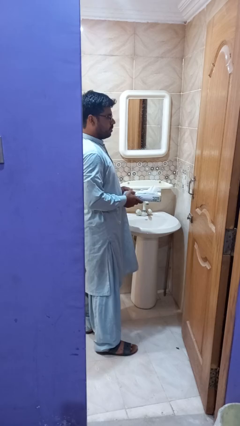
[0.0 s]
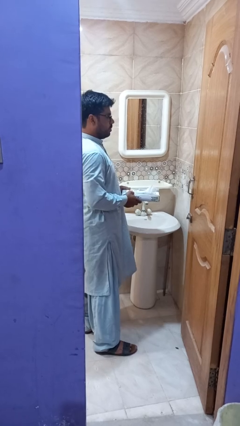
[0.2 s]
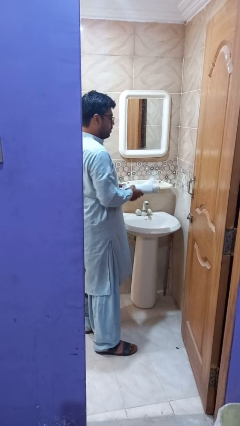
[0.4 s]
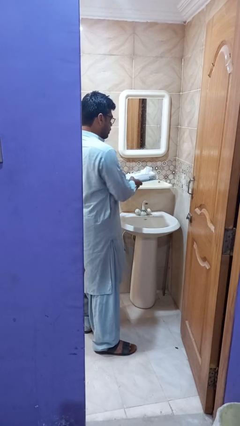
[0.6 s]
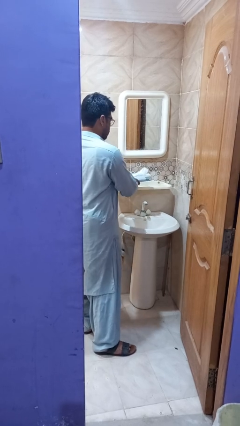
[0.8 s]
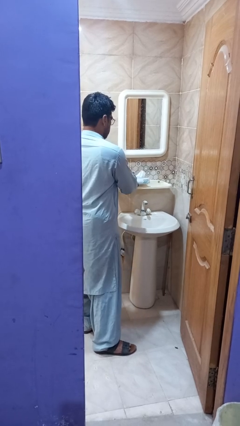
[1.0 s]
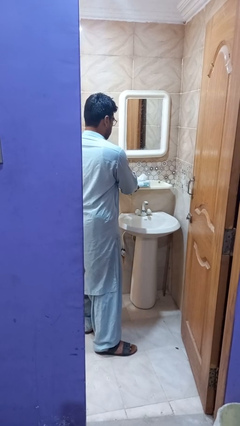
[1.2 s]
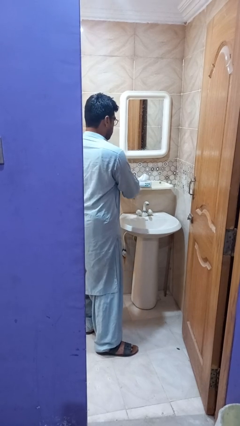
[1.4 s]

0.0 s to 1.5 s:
person puts down object on countertop

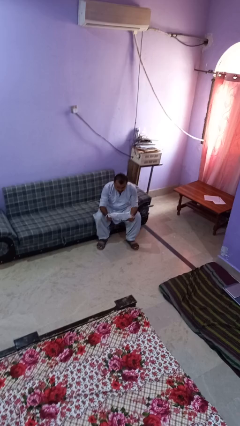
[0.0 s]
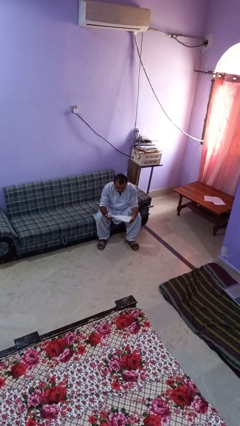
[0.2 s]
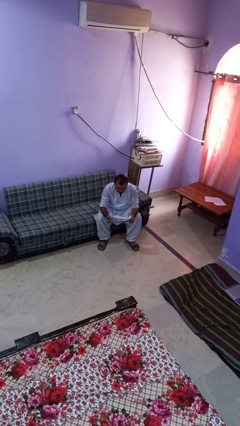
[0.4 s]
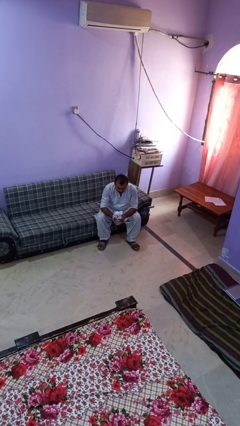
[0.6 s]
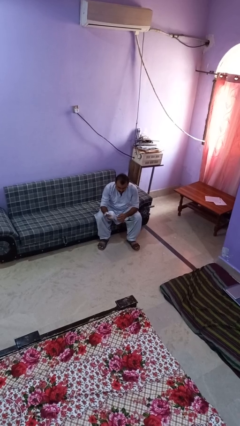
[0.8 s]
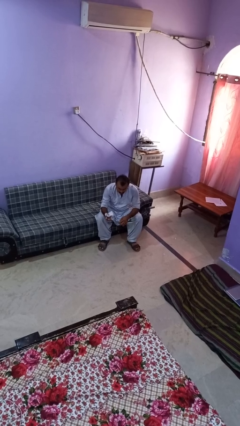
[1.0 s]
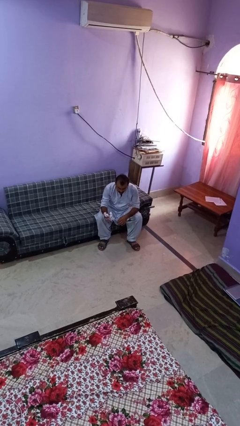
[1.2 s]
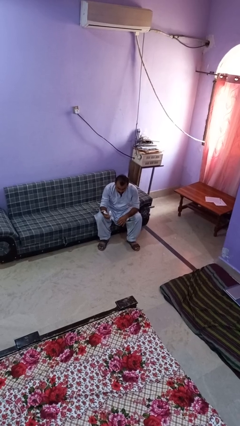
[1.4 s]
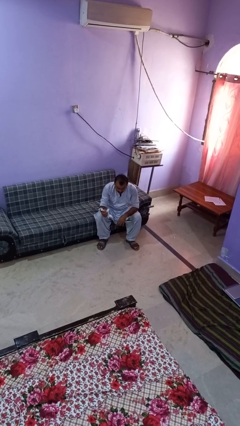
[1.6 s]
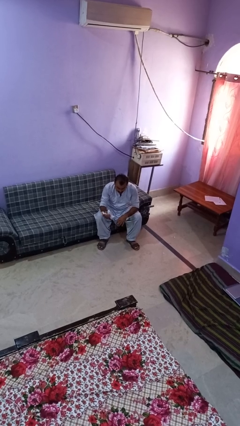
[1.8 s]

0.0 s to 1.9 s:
person crumples paper

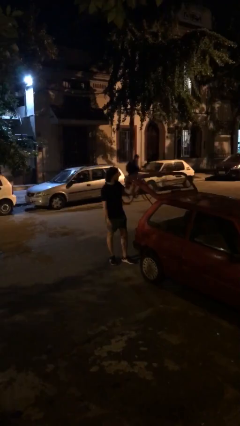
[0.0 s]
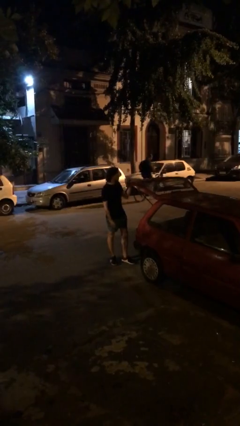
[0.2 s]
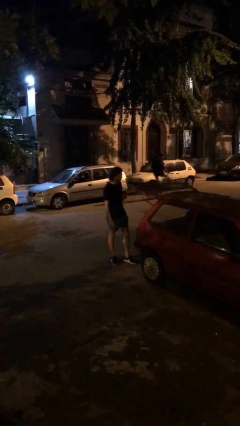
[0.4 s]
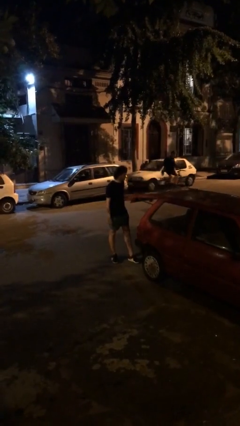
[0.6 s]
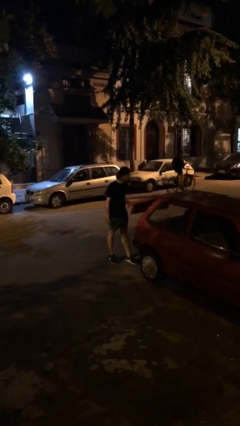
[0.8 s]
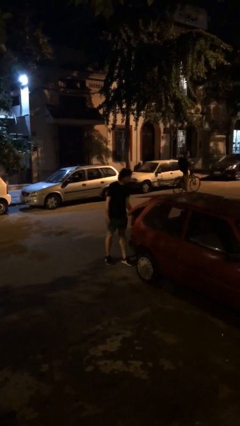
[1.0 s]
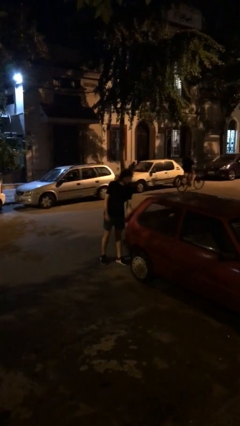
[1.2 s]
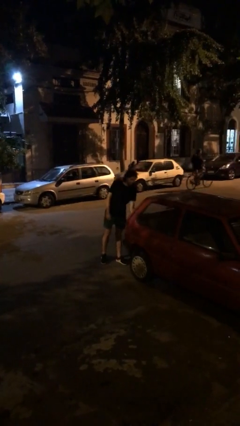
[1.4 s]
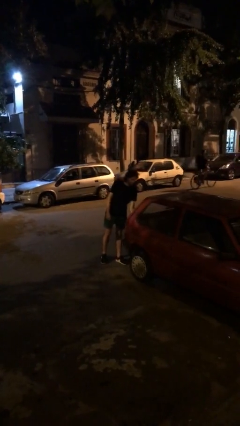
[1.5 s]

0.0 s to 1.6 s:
person closes car trunk

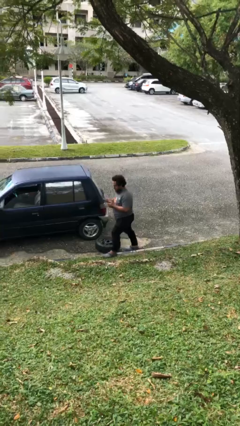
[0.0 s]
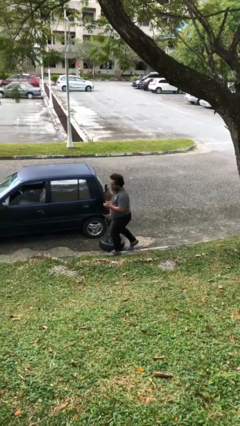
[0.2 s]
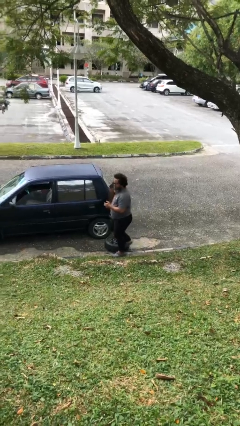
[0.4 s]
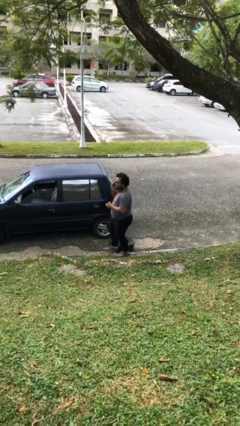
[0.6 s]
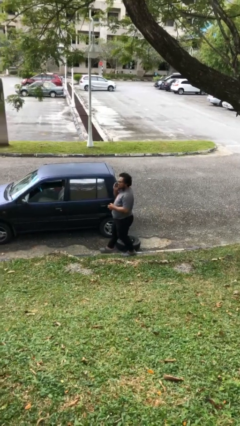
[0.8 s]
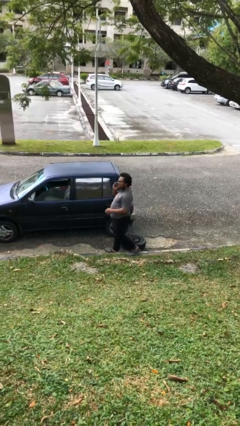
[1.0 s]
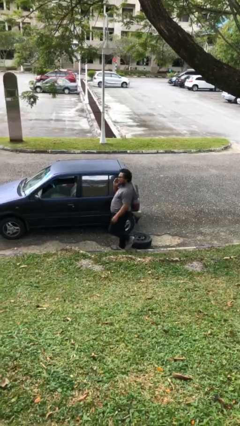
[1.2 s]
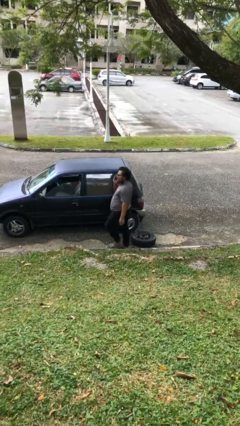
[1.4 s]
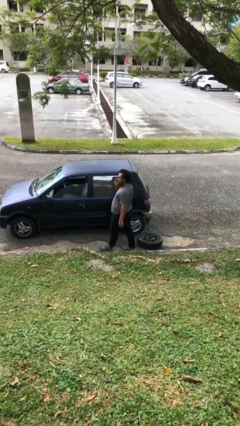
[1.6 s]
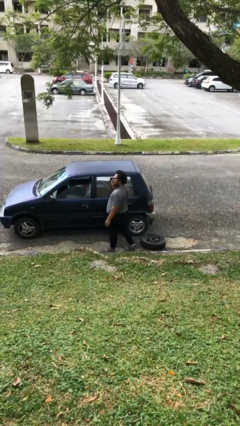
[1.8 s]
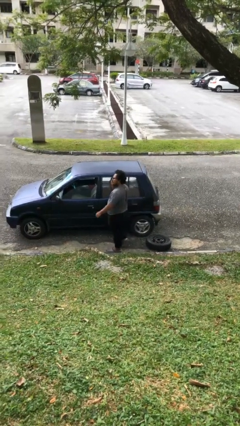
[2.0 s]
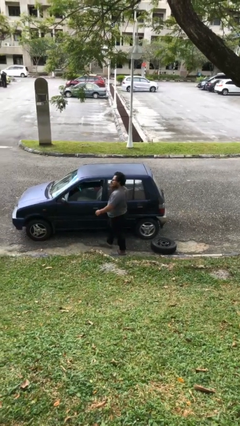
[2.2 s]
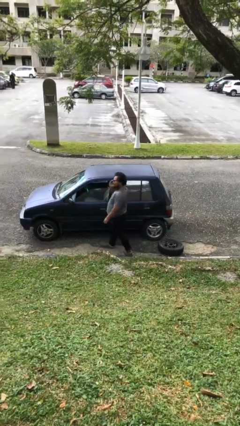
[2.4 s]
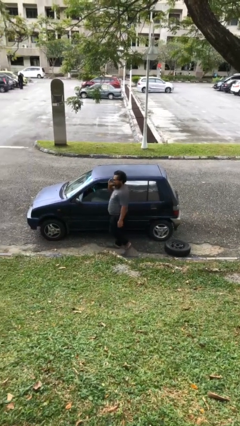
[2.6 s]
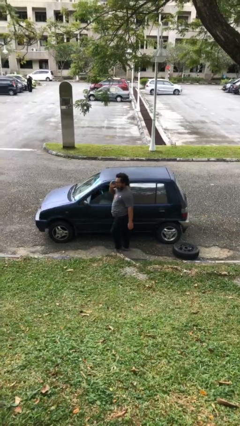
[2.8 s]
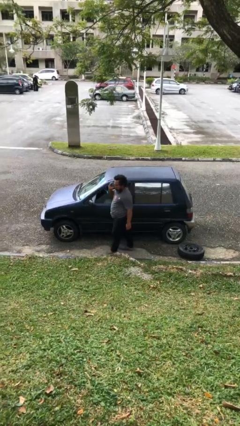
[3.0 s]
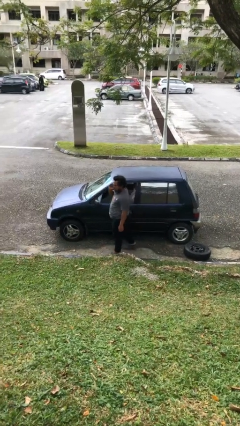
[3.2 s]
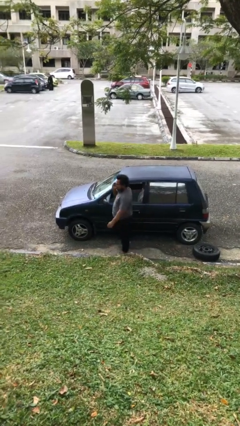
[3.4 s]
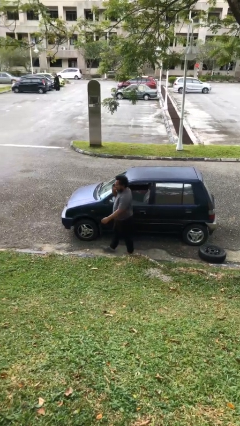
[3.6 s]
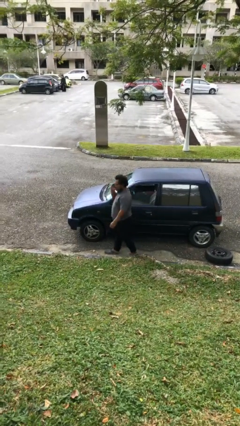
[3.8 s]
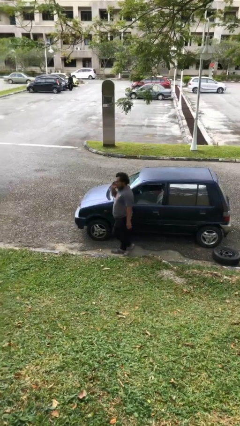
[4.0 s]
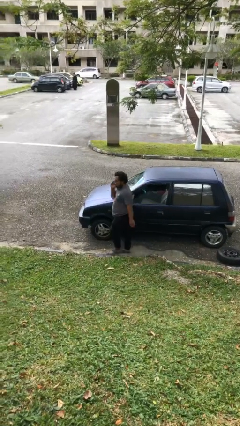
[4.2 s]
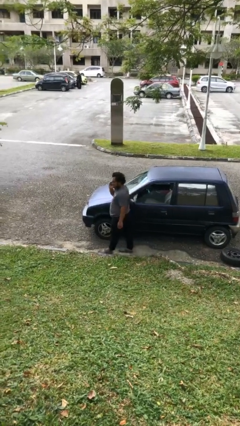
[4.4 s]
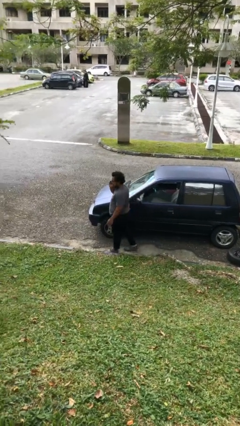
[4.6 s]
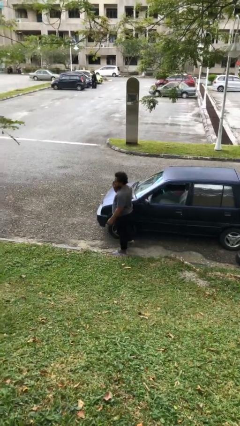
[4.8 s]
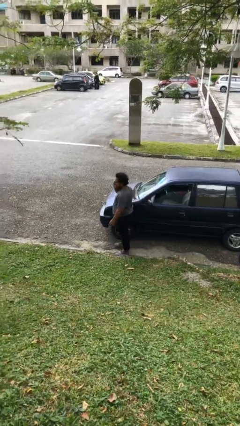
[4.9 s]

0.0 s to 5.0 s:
person talks on phone

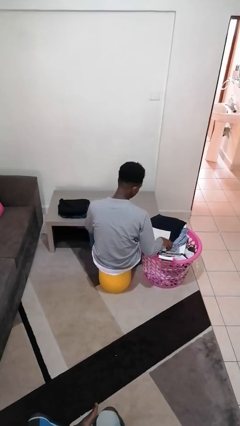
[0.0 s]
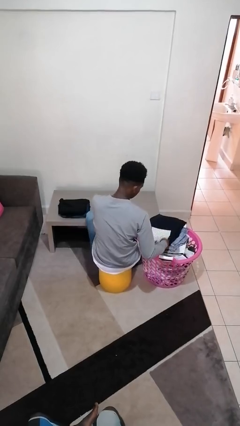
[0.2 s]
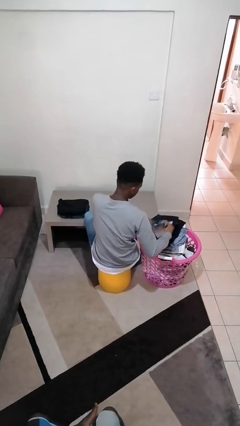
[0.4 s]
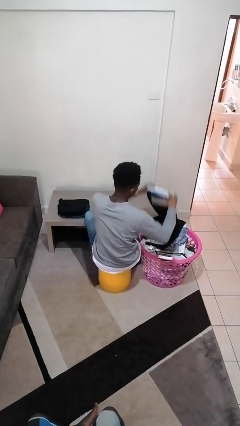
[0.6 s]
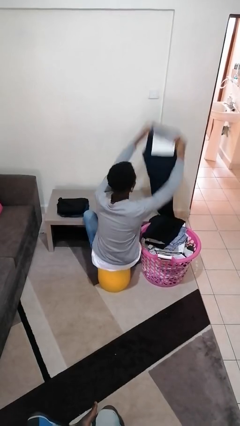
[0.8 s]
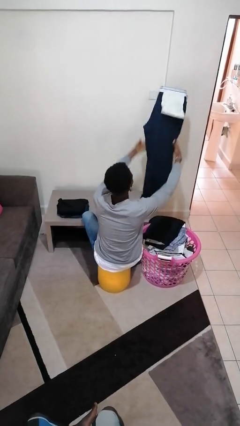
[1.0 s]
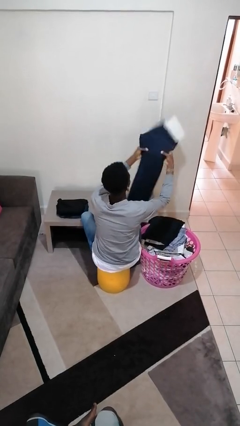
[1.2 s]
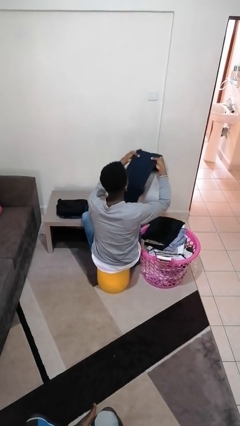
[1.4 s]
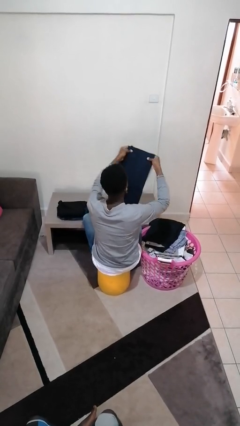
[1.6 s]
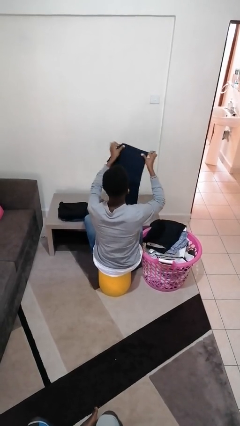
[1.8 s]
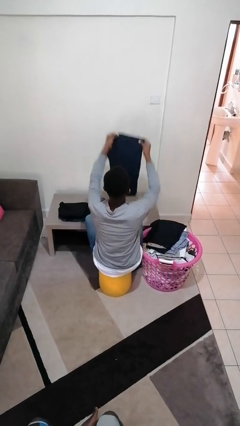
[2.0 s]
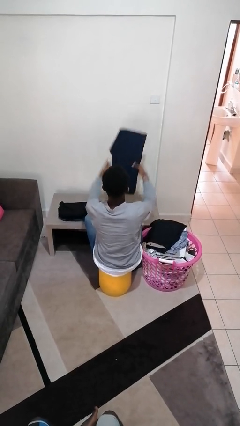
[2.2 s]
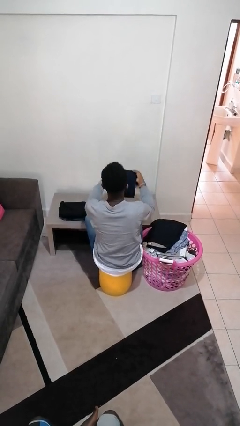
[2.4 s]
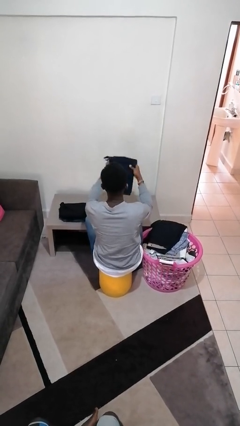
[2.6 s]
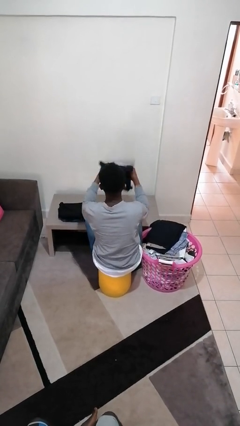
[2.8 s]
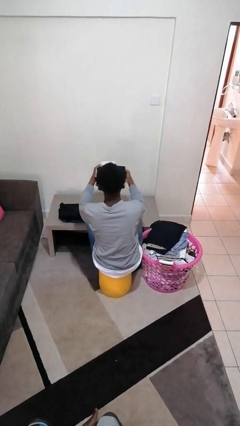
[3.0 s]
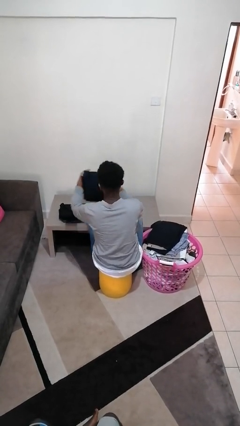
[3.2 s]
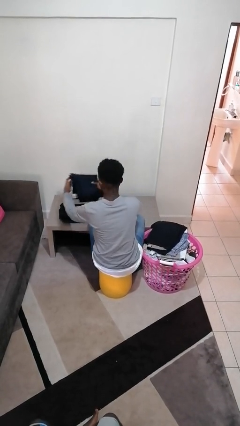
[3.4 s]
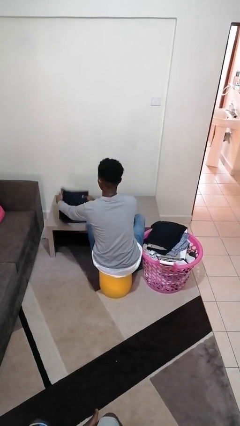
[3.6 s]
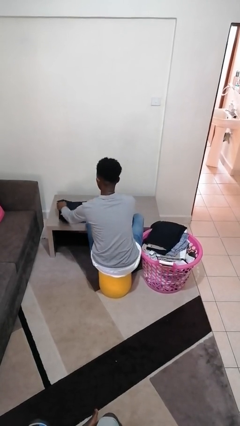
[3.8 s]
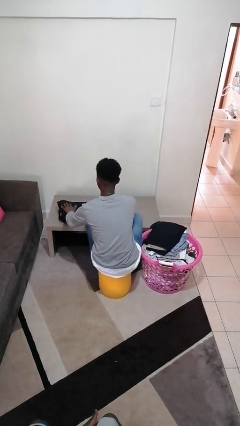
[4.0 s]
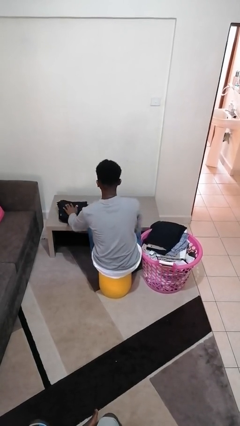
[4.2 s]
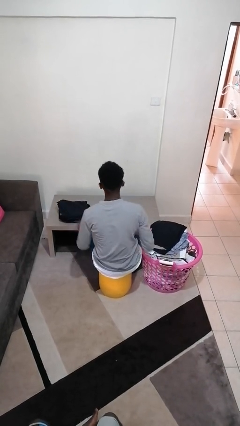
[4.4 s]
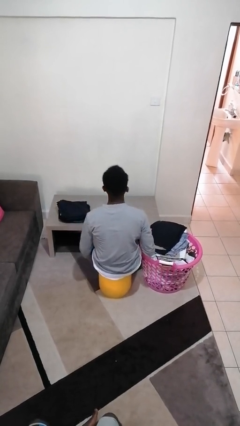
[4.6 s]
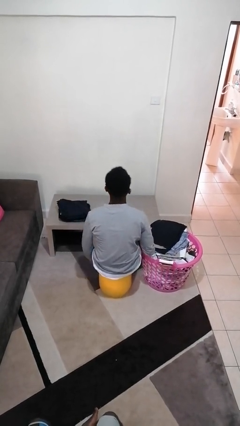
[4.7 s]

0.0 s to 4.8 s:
person folds pants

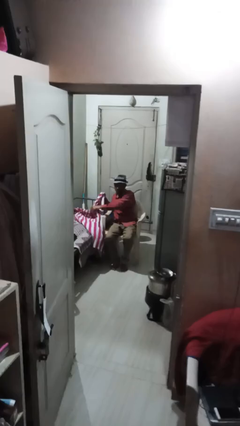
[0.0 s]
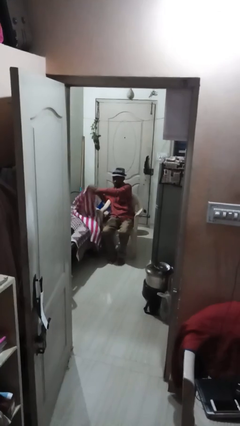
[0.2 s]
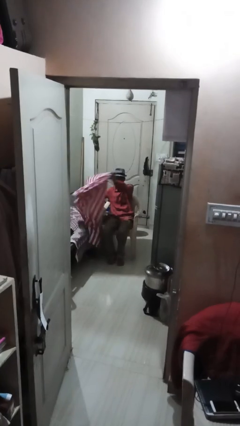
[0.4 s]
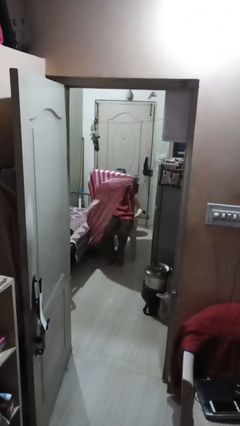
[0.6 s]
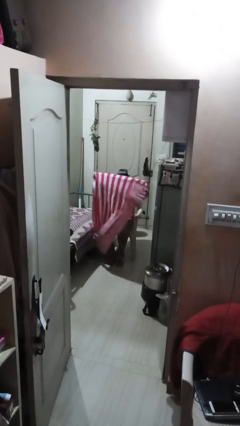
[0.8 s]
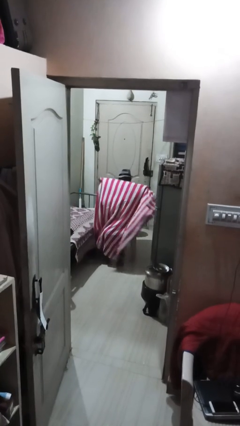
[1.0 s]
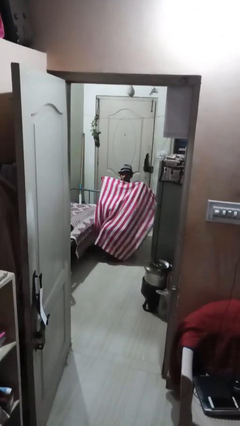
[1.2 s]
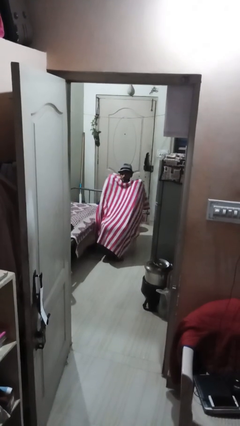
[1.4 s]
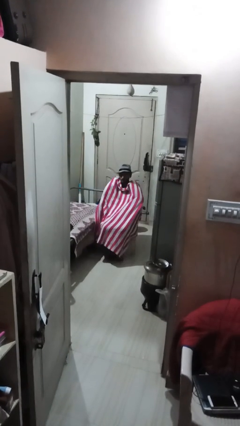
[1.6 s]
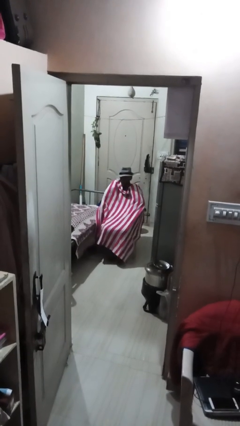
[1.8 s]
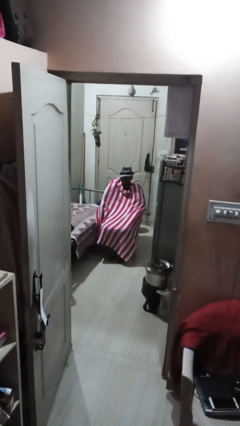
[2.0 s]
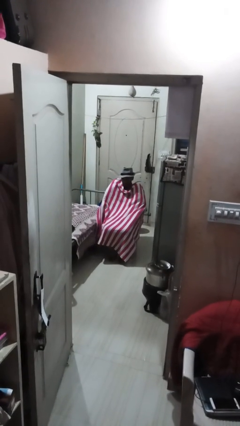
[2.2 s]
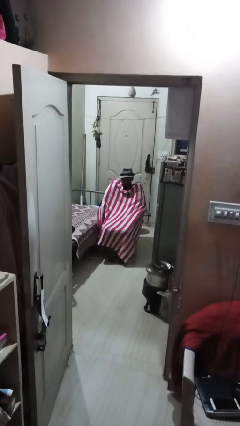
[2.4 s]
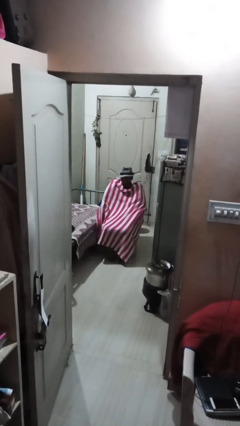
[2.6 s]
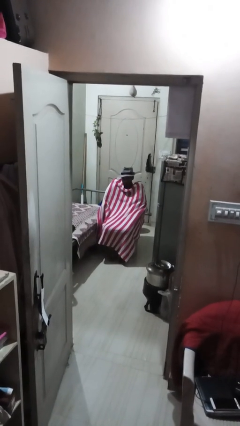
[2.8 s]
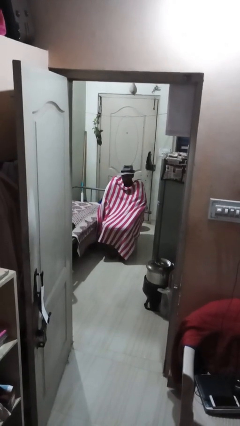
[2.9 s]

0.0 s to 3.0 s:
person covers with blanket
